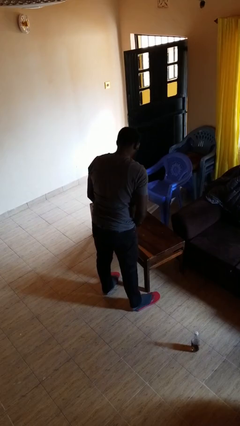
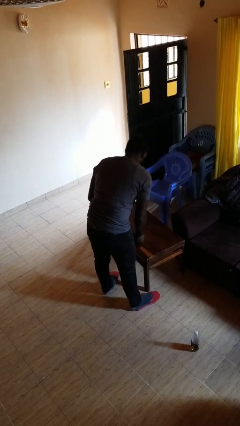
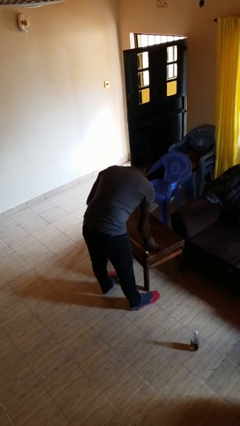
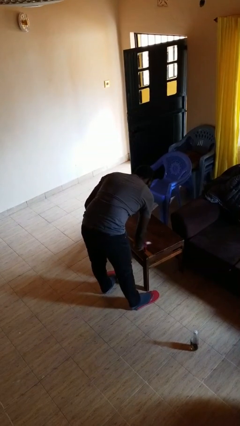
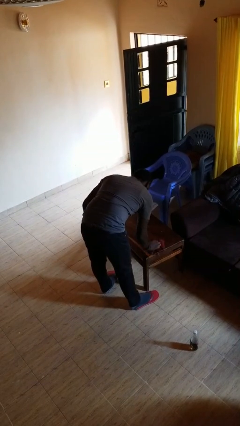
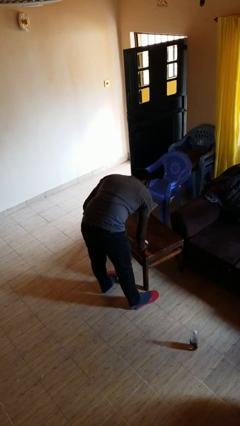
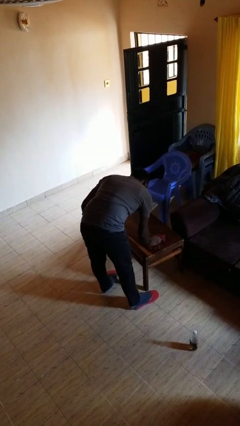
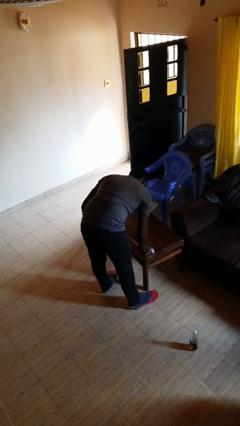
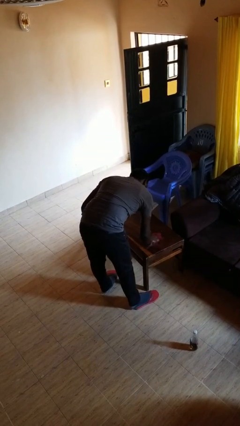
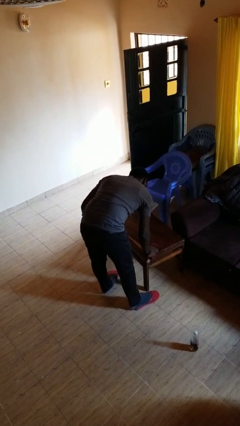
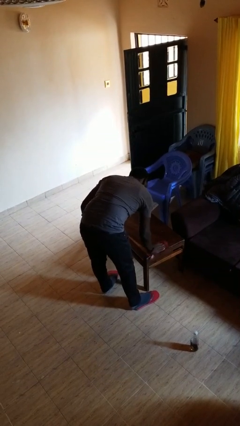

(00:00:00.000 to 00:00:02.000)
person cleans table with rag

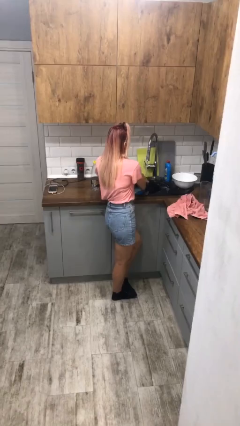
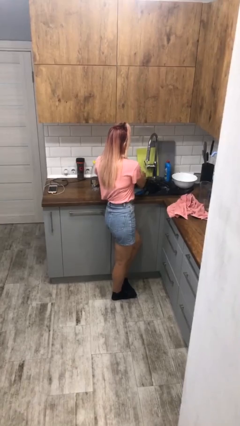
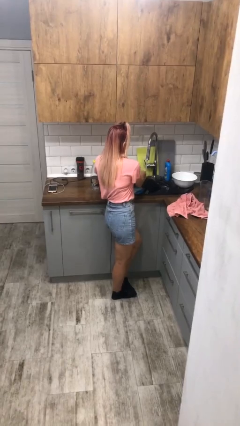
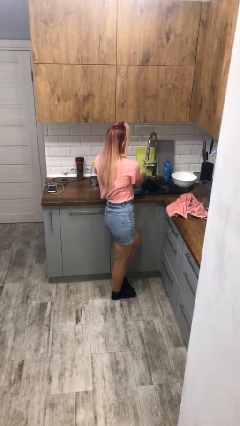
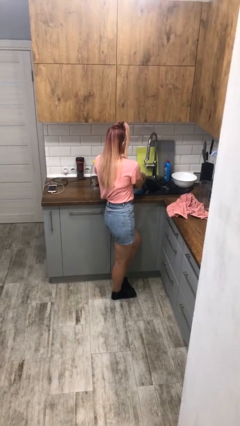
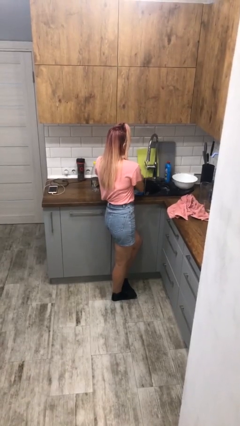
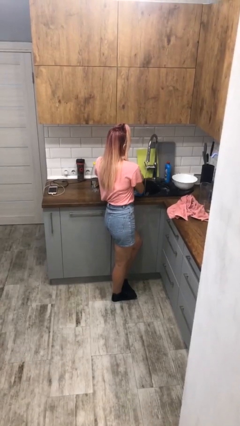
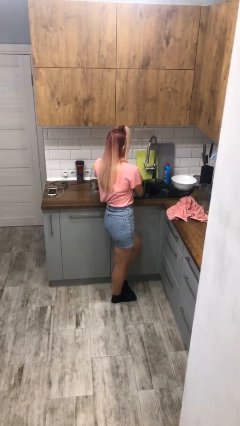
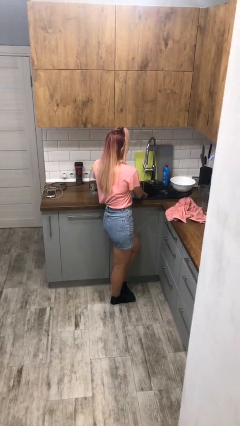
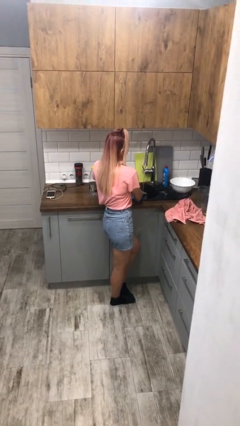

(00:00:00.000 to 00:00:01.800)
person washes hands

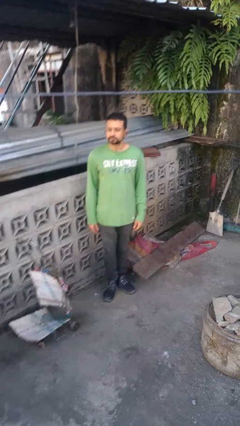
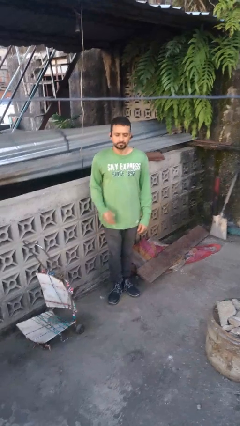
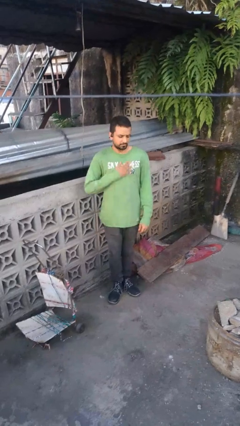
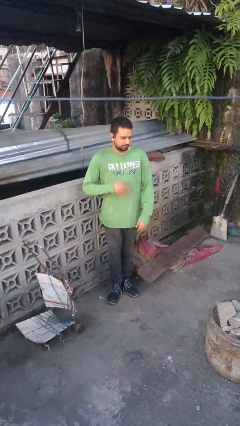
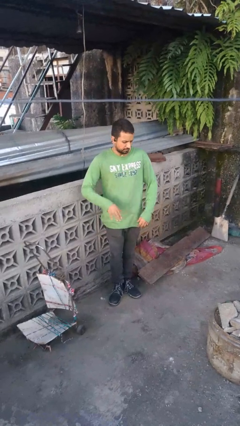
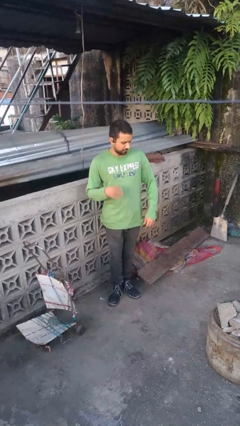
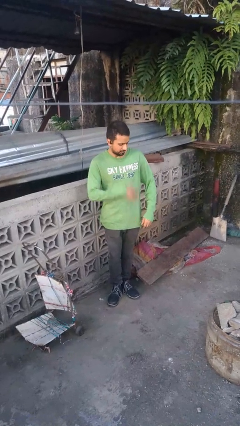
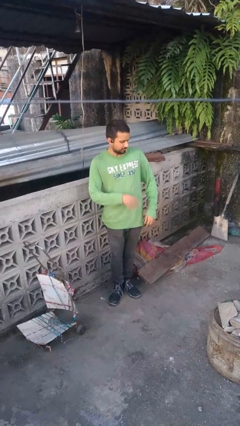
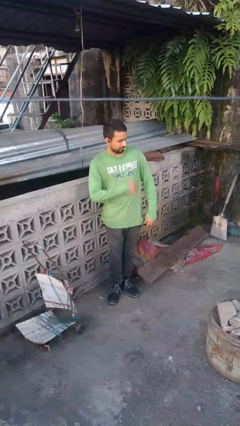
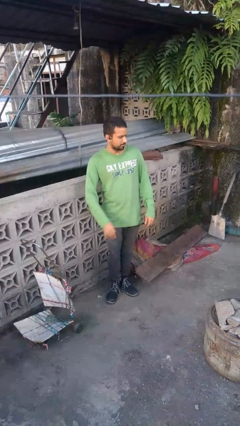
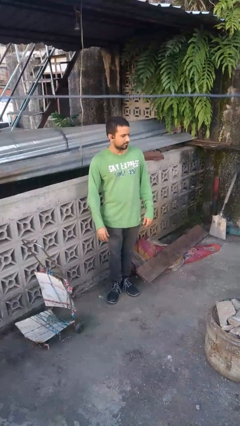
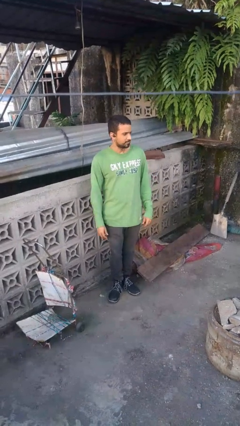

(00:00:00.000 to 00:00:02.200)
person swats bug

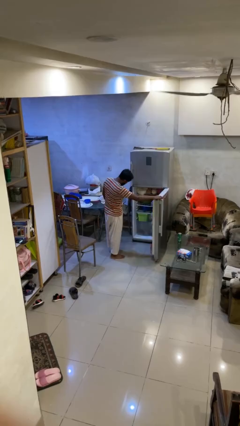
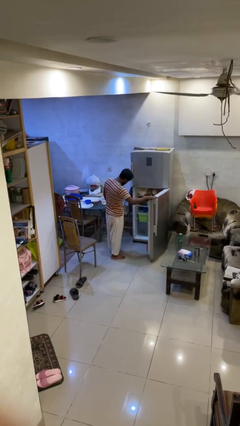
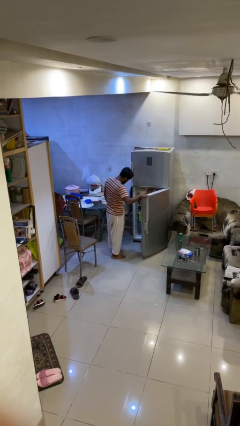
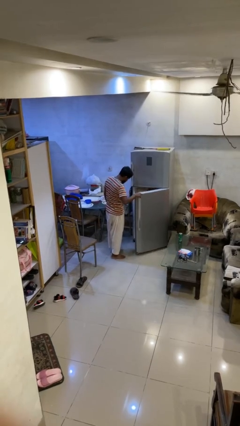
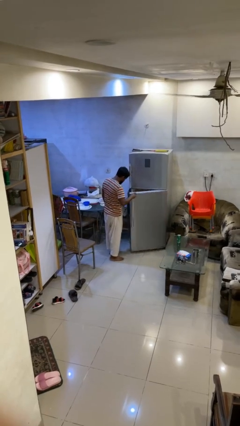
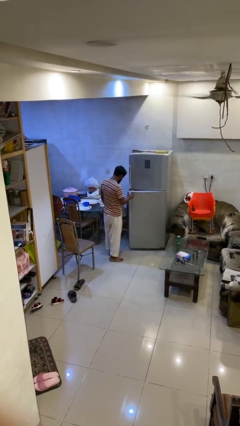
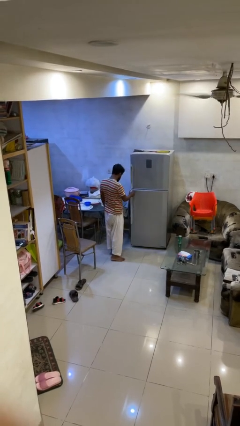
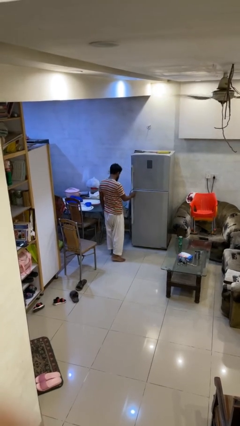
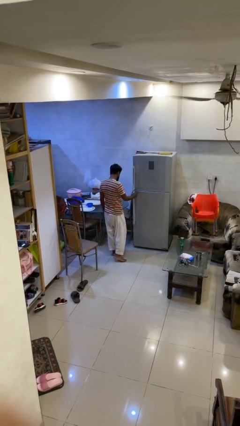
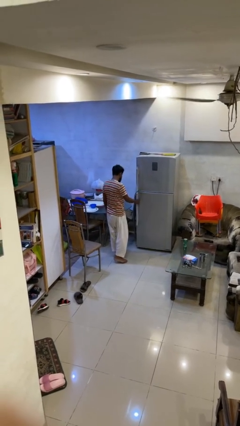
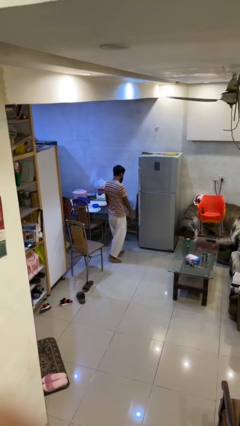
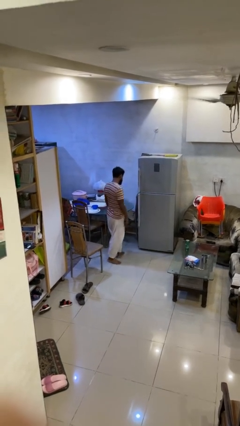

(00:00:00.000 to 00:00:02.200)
person closes refrigerator

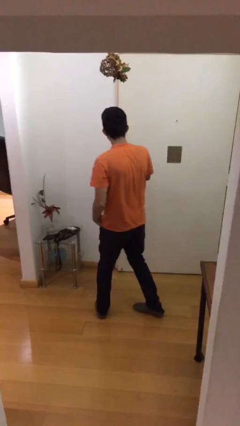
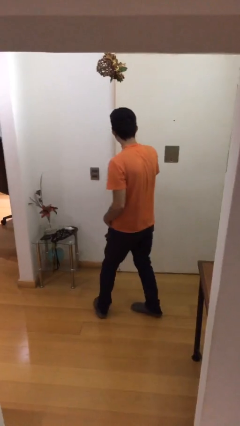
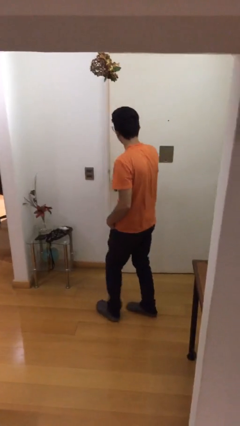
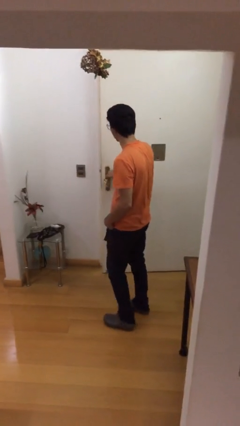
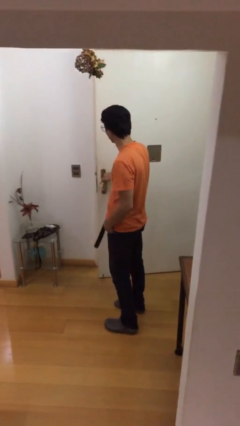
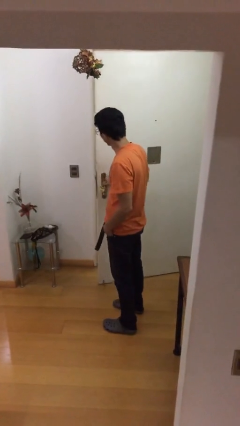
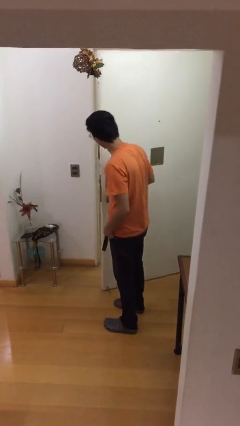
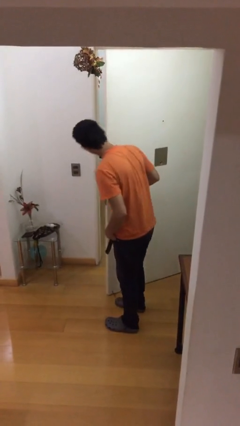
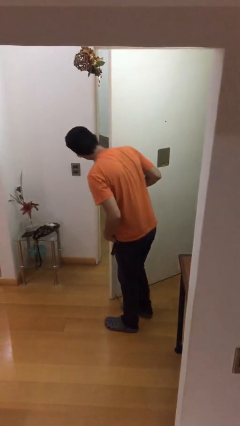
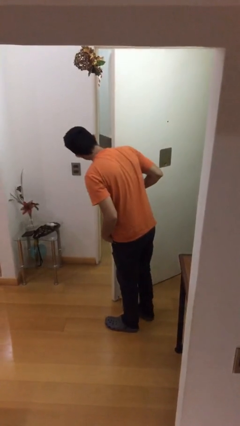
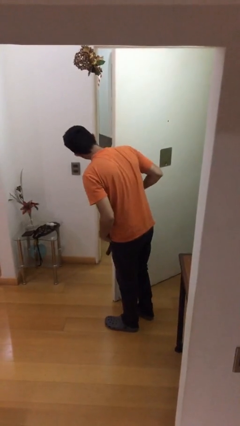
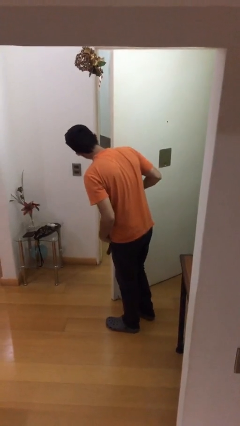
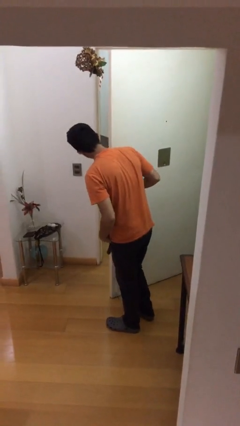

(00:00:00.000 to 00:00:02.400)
person opens facility door

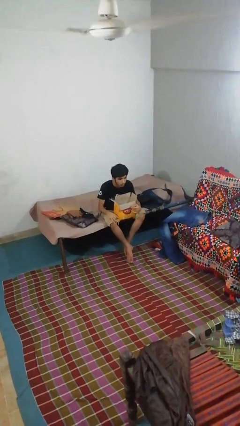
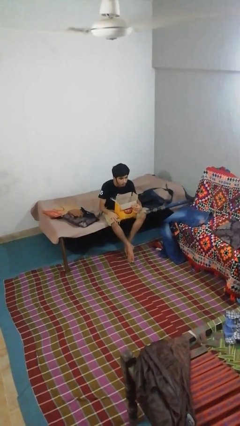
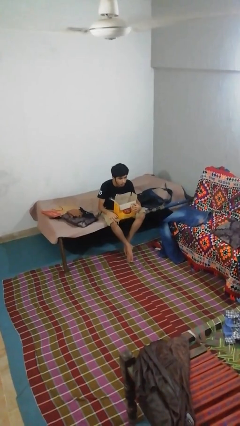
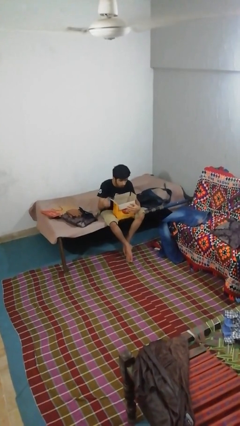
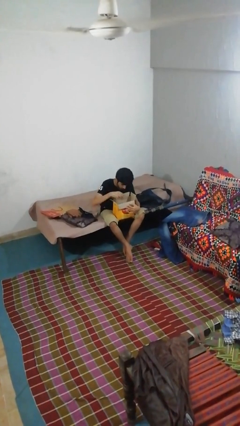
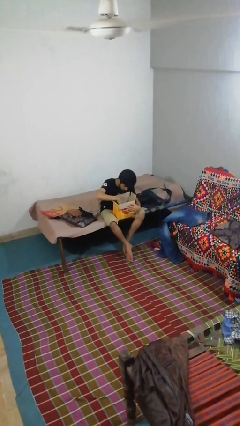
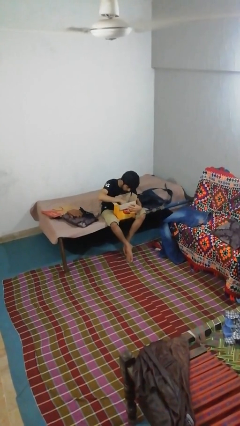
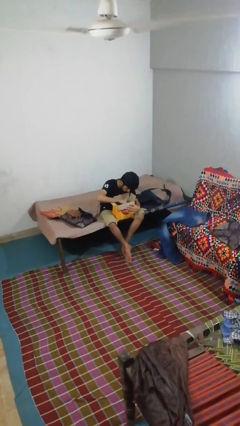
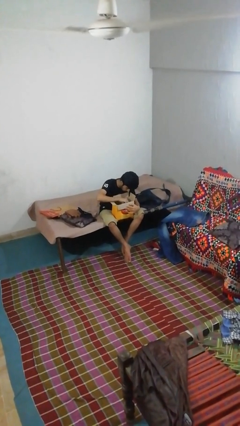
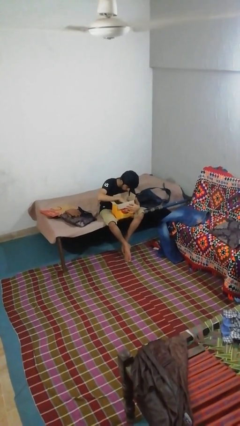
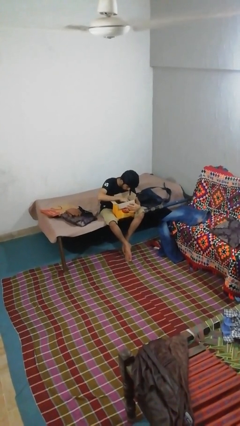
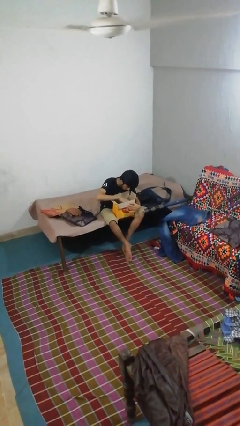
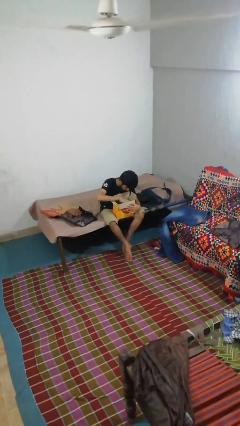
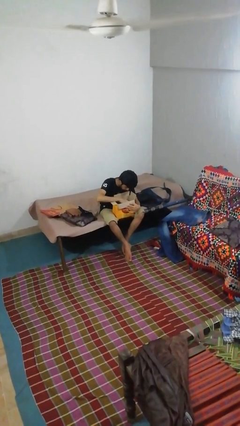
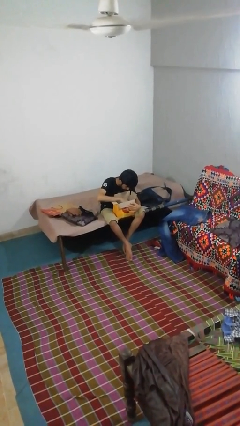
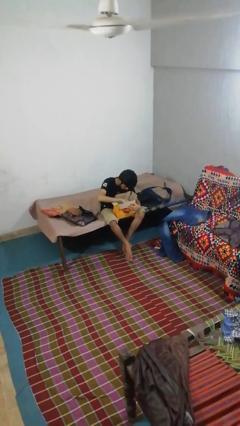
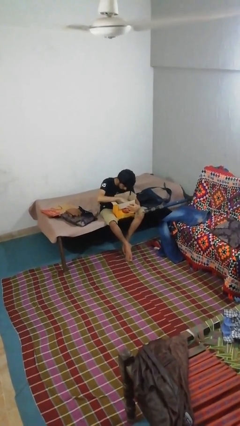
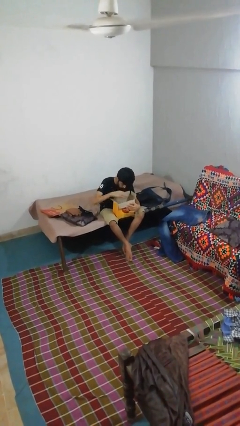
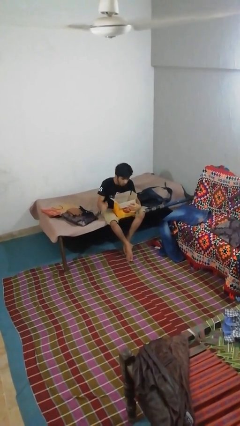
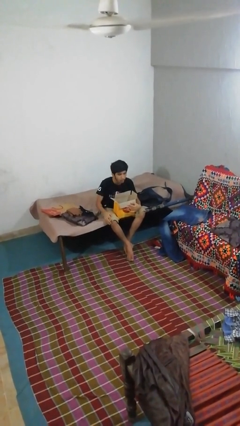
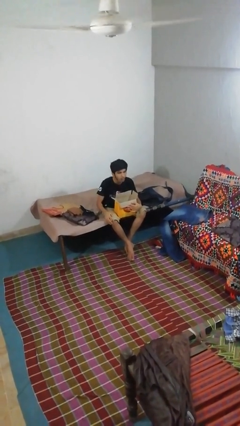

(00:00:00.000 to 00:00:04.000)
person searches in box

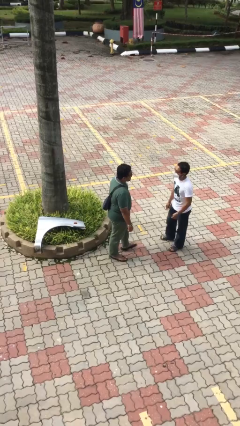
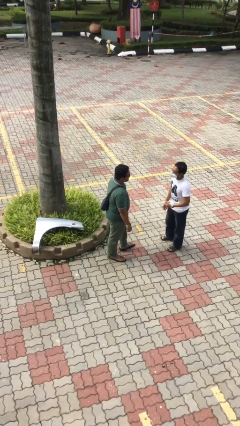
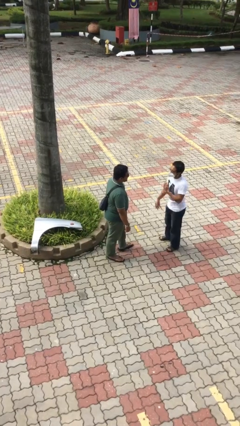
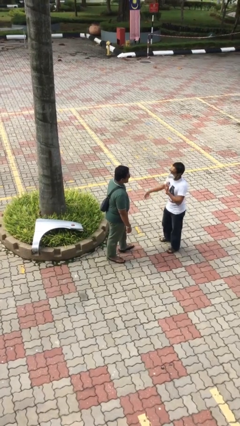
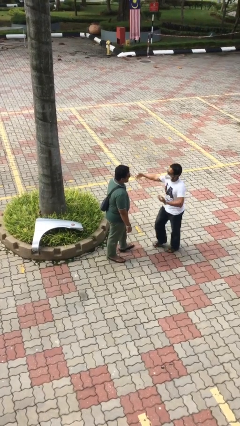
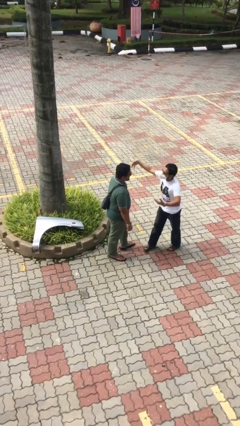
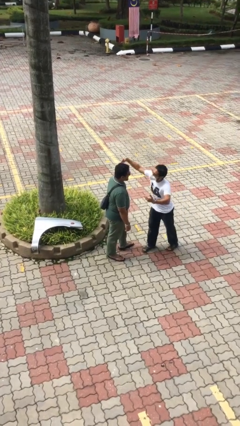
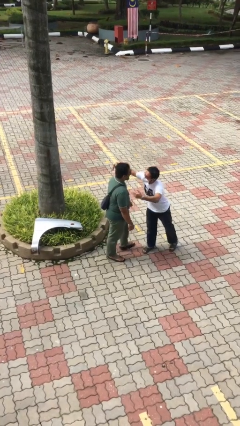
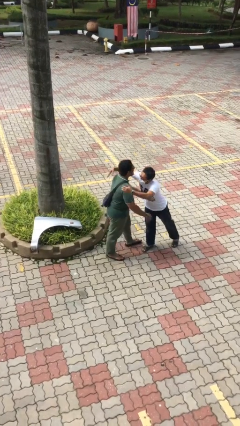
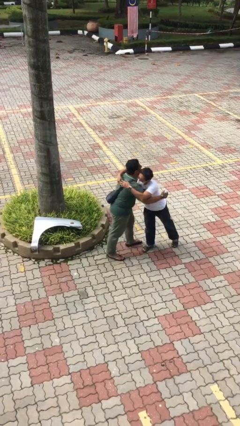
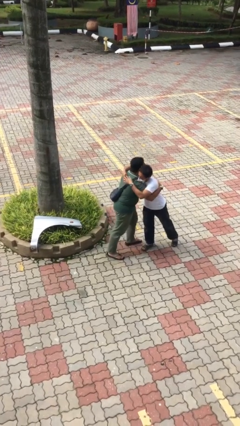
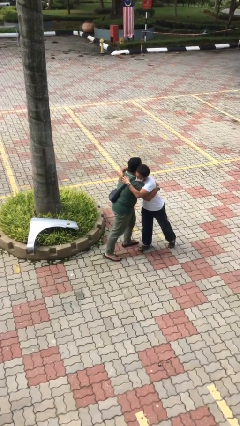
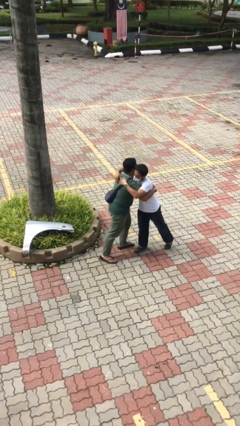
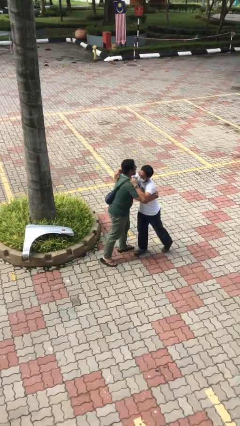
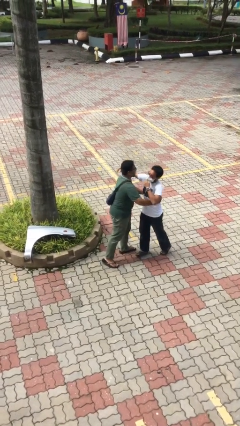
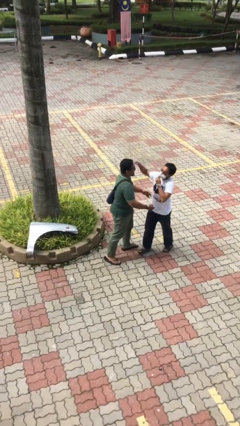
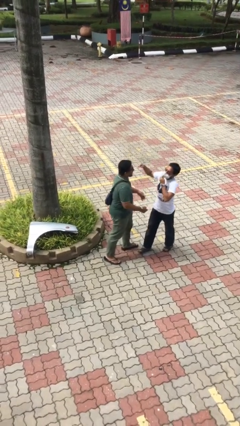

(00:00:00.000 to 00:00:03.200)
person embraces person
